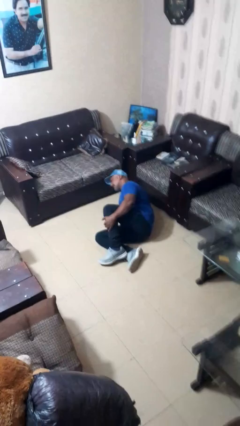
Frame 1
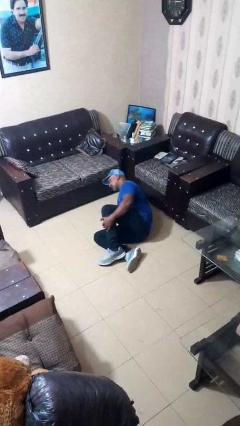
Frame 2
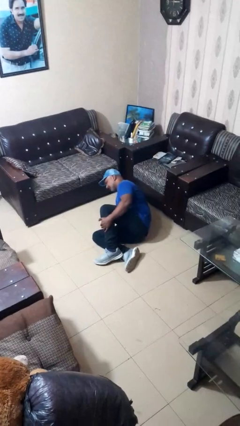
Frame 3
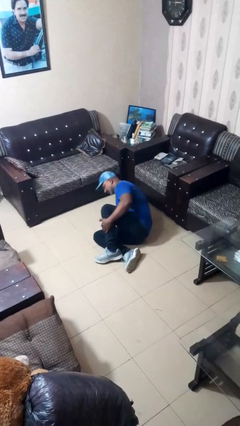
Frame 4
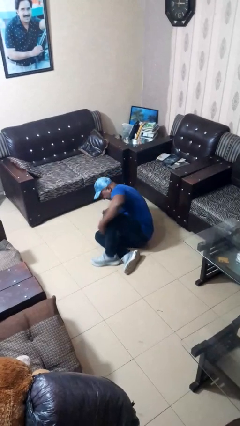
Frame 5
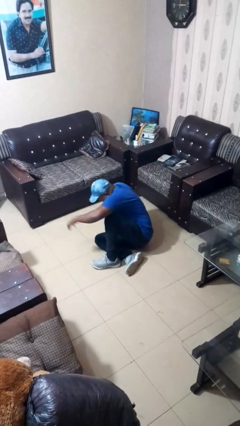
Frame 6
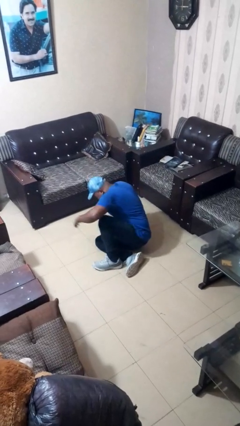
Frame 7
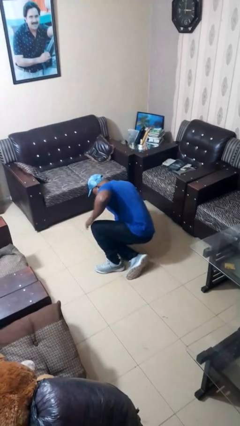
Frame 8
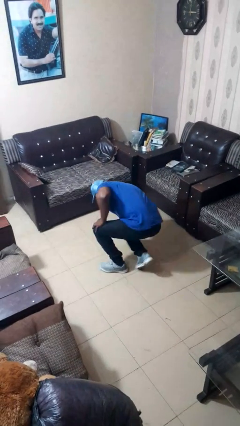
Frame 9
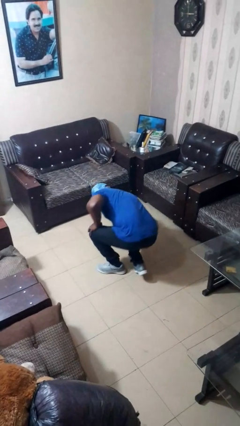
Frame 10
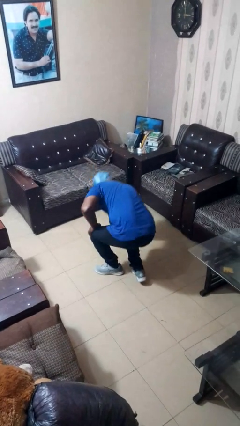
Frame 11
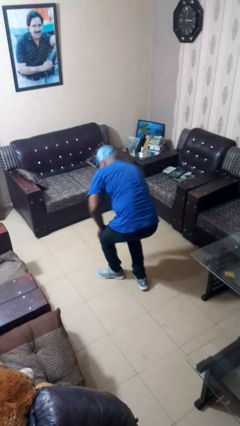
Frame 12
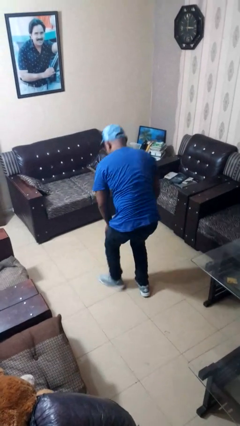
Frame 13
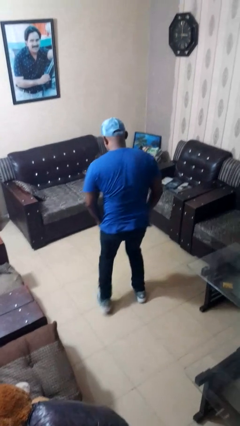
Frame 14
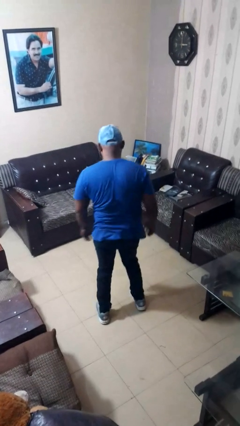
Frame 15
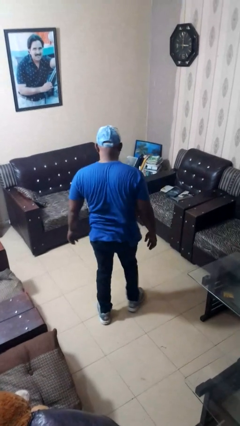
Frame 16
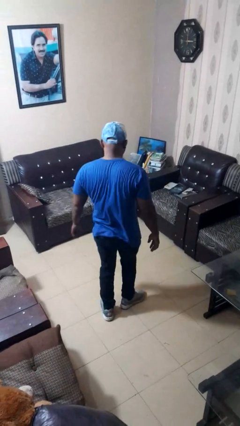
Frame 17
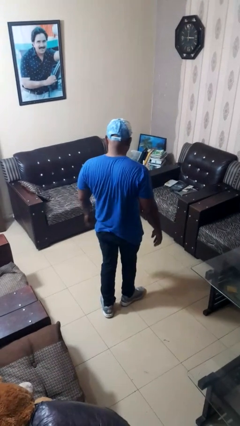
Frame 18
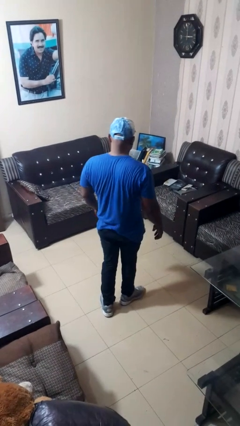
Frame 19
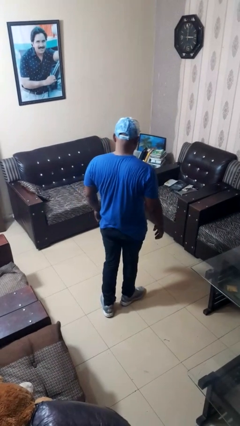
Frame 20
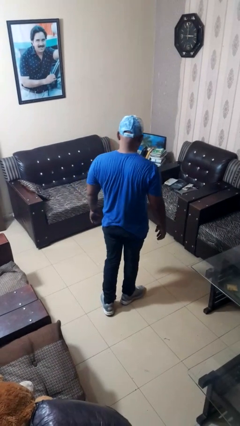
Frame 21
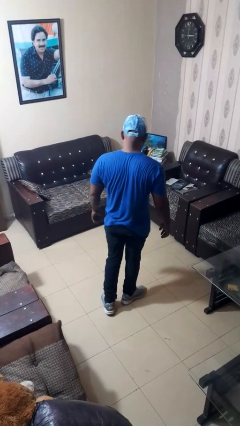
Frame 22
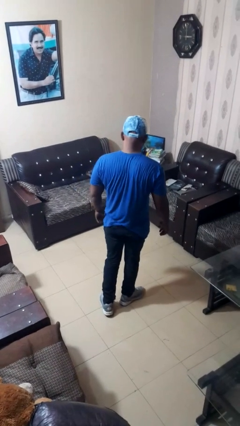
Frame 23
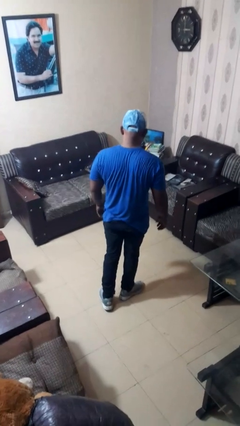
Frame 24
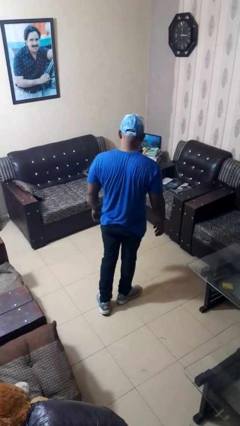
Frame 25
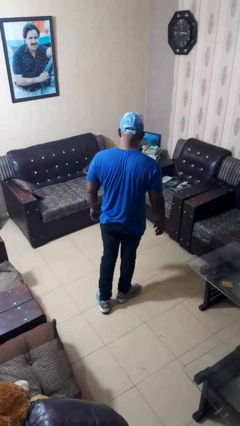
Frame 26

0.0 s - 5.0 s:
person stands up from floor

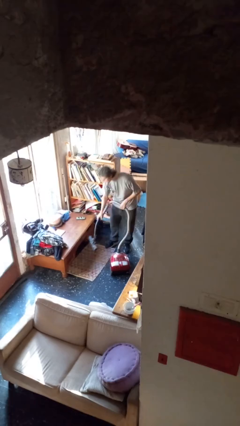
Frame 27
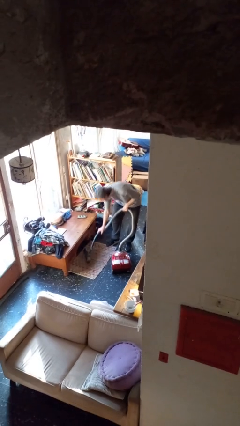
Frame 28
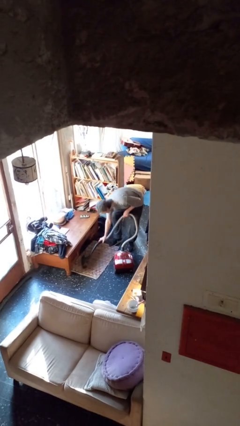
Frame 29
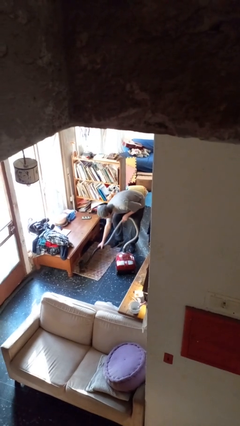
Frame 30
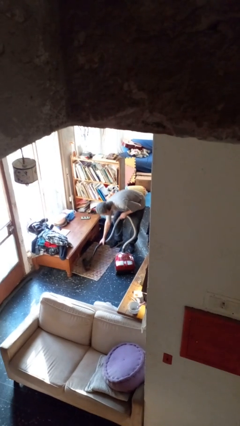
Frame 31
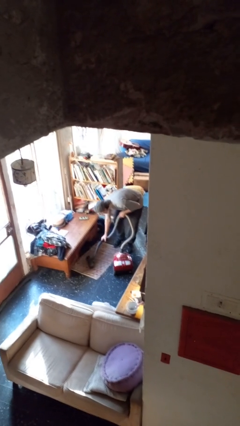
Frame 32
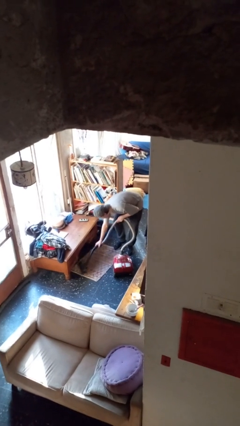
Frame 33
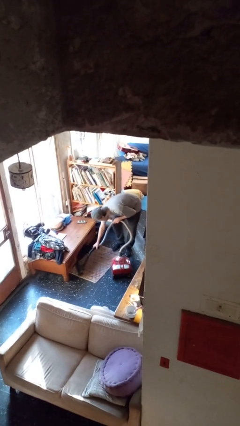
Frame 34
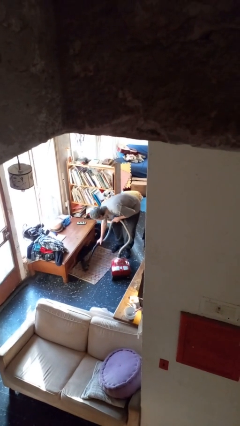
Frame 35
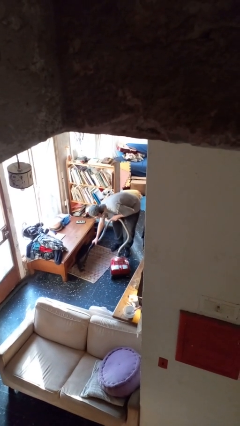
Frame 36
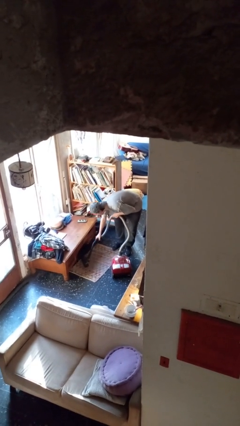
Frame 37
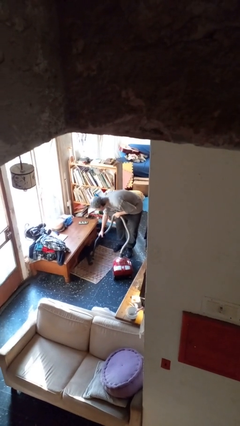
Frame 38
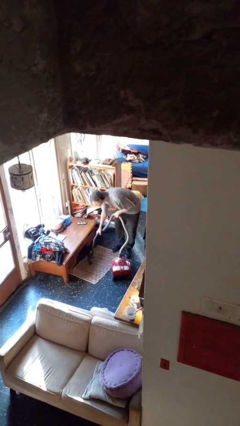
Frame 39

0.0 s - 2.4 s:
person vacuums carpet

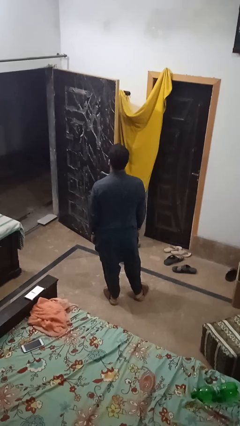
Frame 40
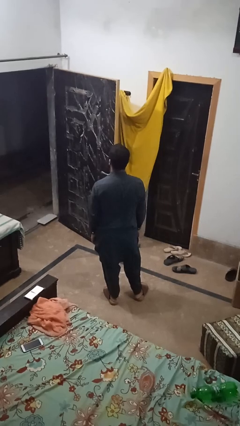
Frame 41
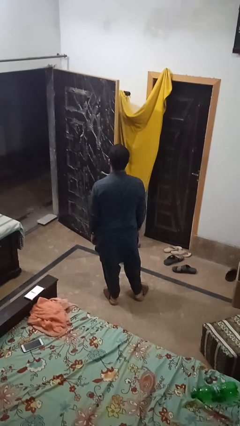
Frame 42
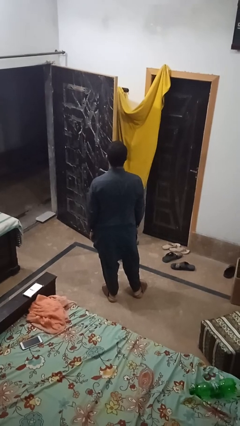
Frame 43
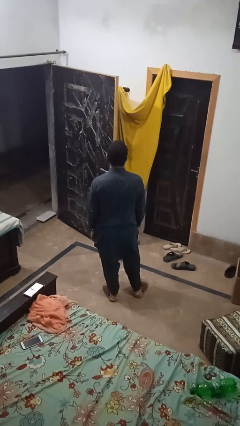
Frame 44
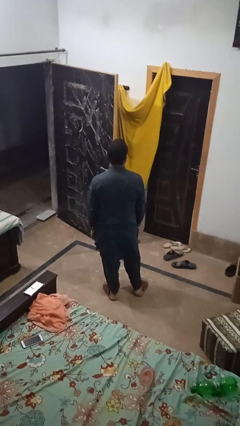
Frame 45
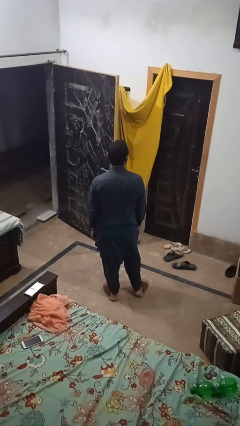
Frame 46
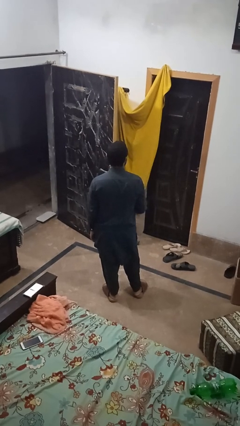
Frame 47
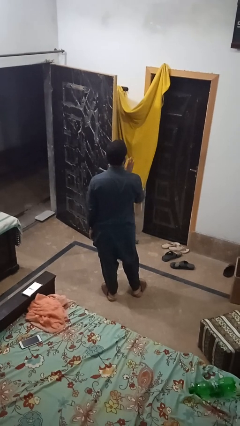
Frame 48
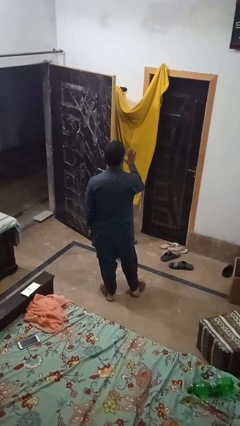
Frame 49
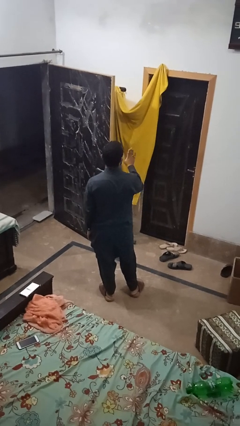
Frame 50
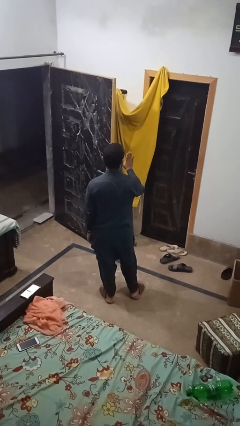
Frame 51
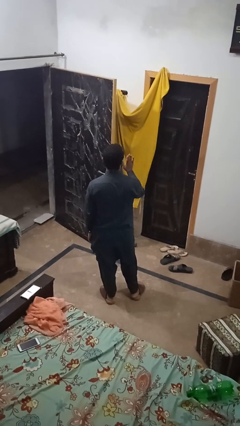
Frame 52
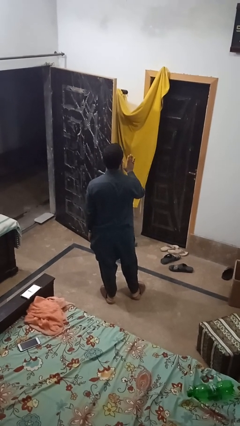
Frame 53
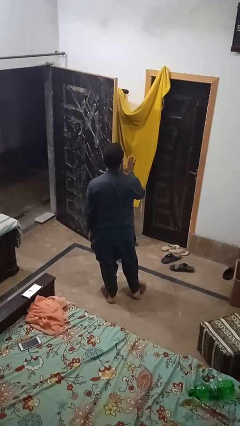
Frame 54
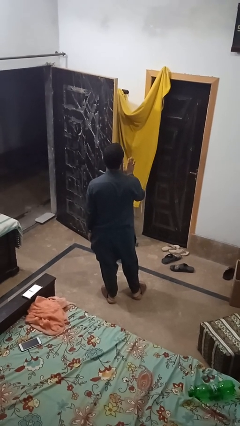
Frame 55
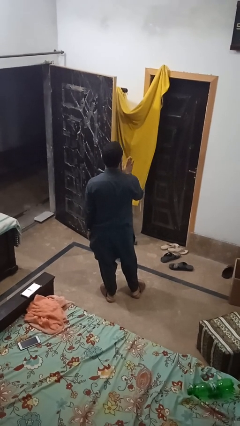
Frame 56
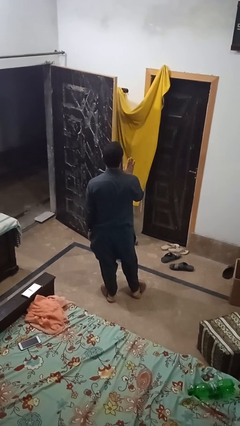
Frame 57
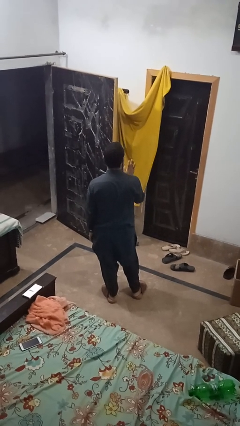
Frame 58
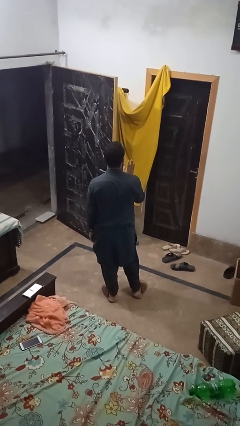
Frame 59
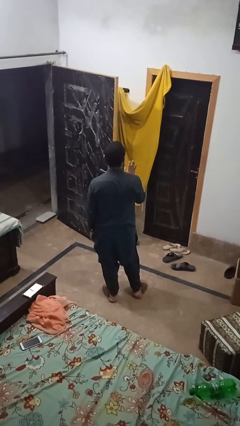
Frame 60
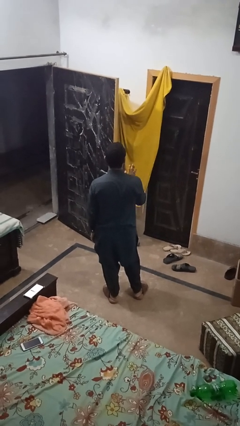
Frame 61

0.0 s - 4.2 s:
person gestures stop

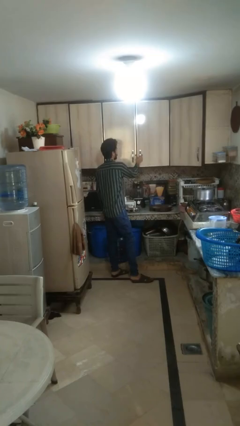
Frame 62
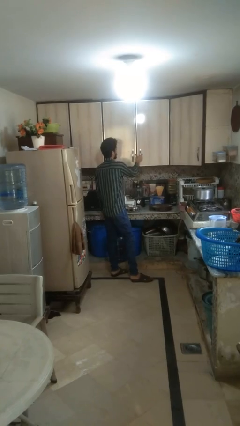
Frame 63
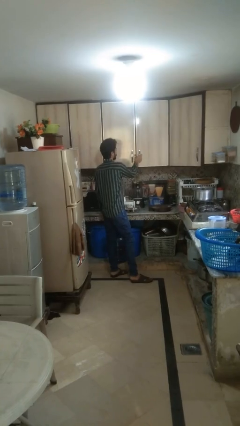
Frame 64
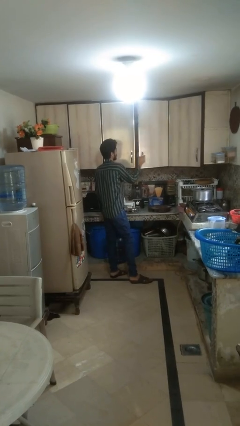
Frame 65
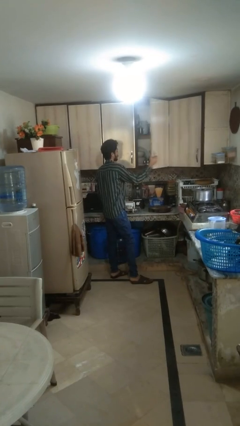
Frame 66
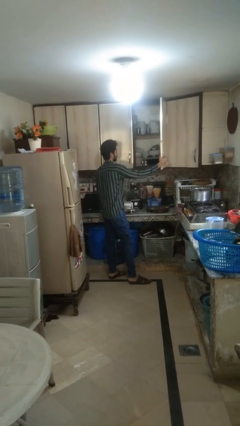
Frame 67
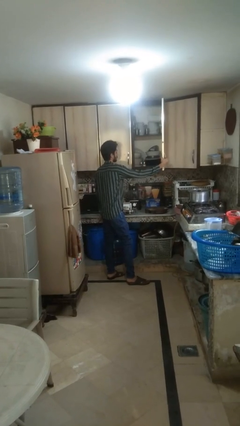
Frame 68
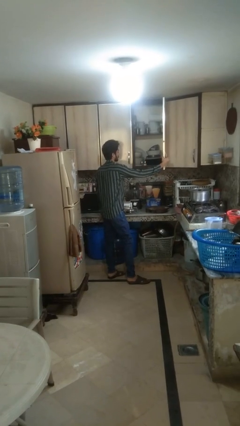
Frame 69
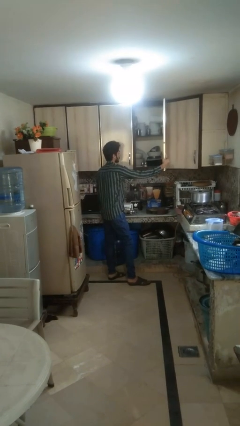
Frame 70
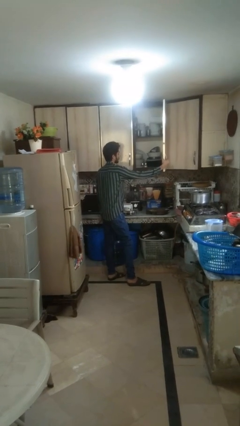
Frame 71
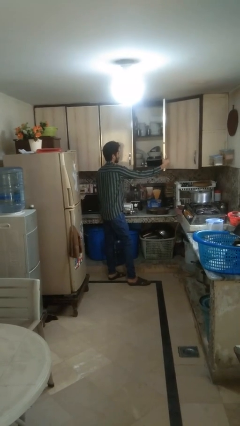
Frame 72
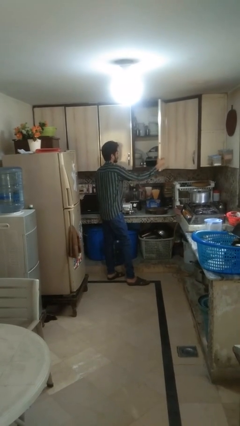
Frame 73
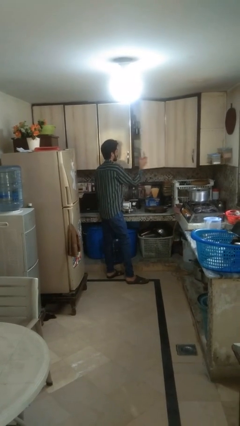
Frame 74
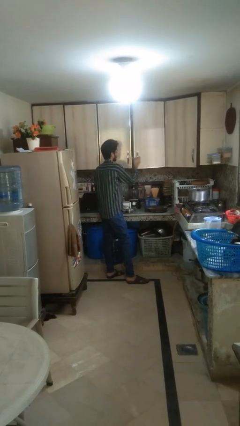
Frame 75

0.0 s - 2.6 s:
person opens cabinet

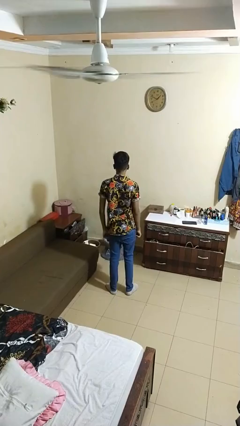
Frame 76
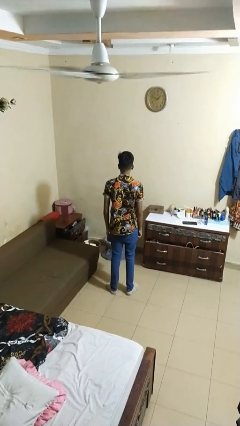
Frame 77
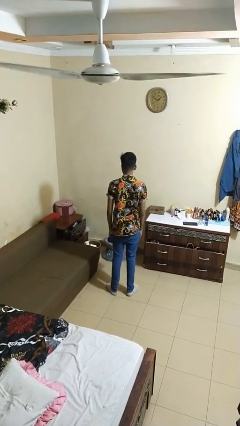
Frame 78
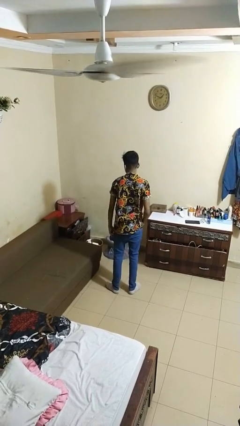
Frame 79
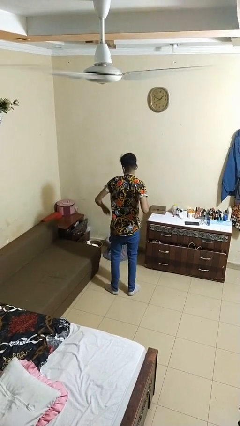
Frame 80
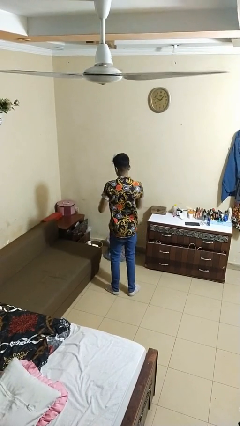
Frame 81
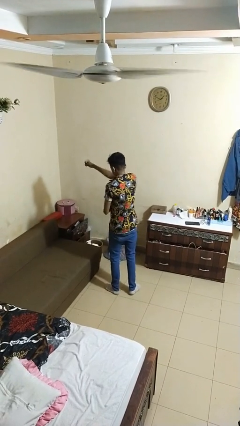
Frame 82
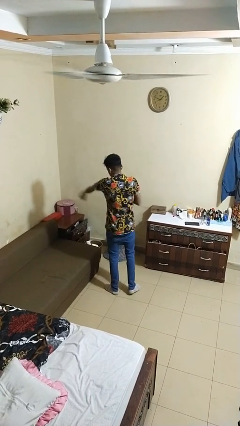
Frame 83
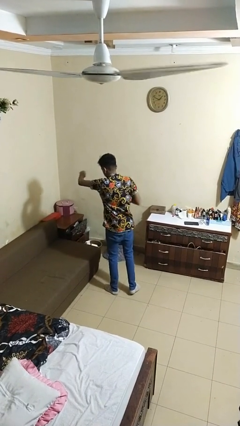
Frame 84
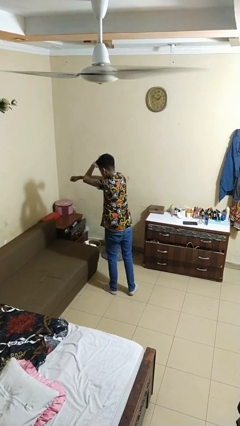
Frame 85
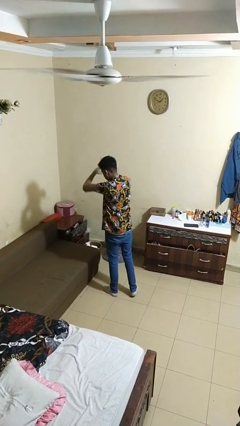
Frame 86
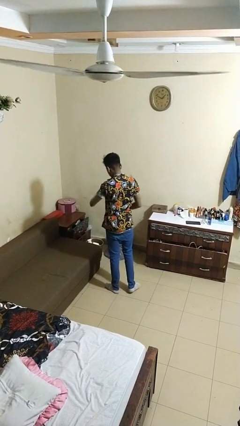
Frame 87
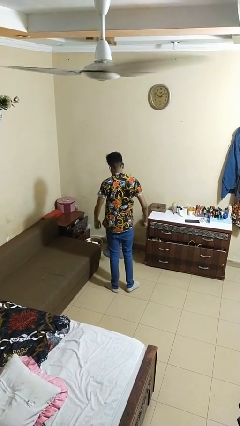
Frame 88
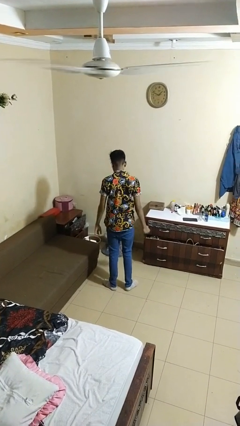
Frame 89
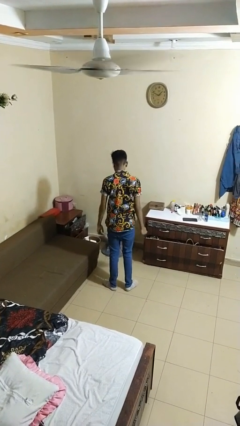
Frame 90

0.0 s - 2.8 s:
person punches

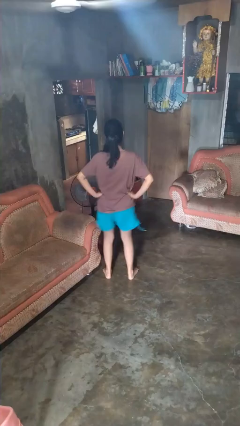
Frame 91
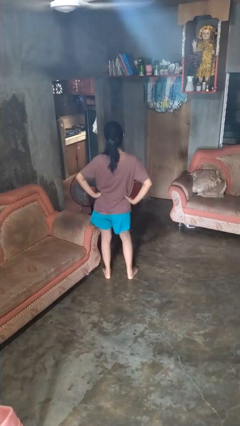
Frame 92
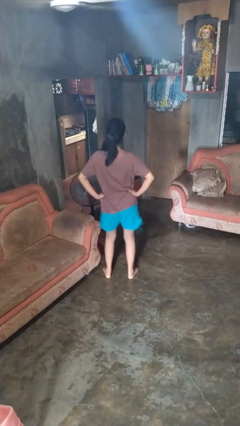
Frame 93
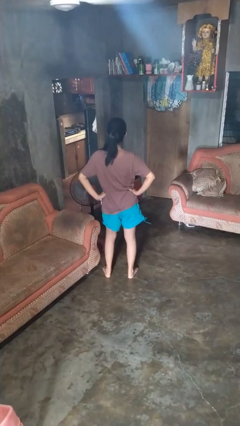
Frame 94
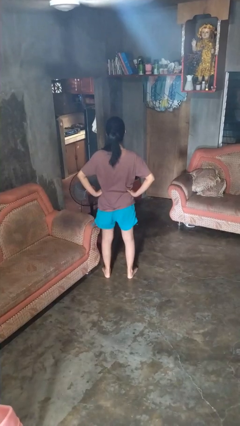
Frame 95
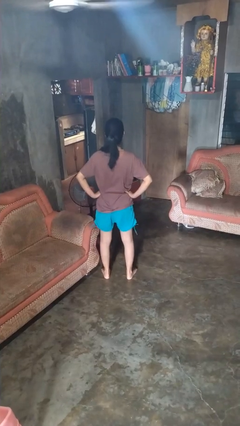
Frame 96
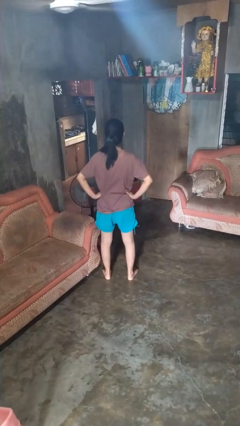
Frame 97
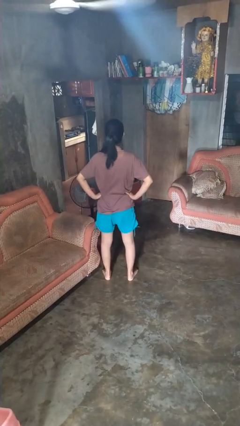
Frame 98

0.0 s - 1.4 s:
person wiggles hips
